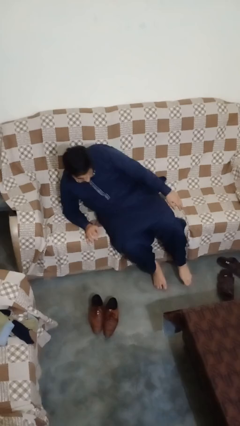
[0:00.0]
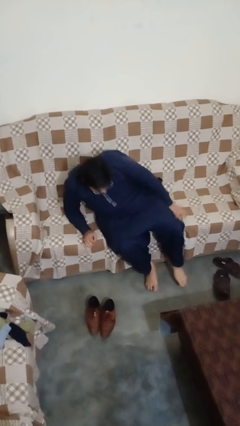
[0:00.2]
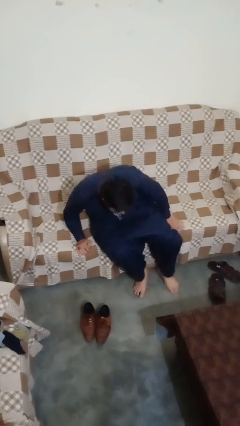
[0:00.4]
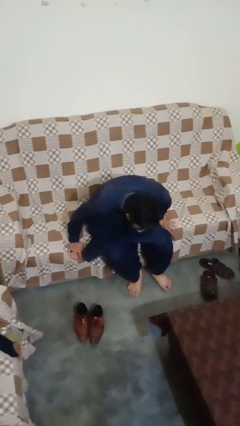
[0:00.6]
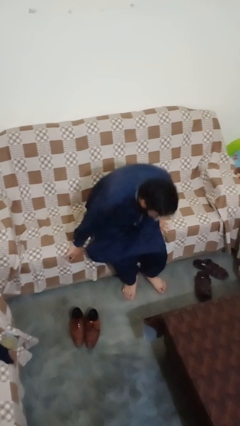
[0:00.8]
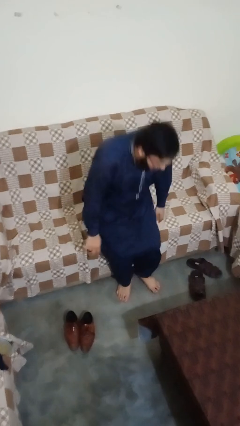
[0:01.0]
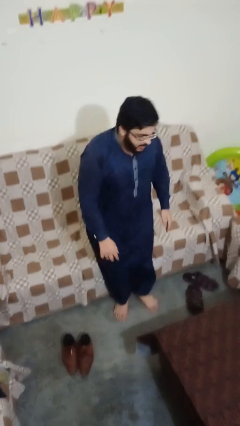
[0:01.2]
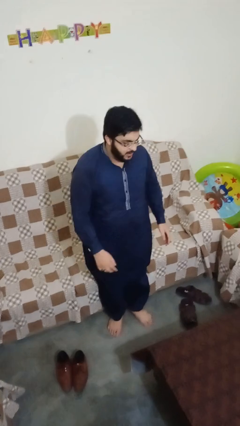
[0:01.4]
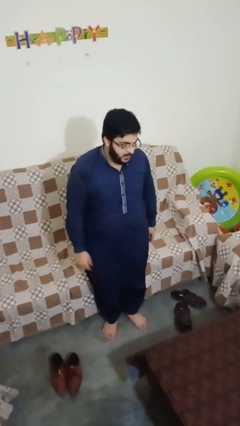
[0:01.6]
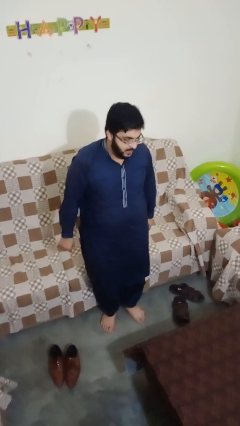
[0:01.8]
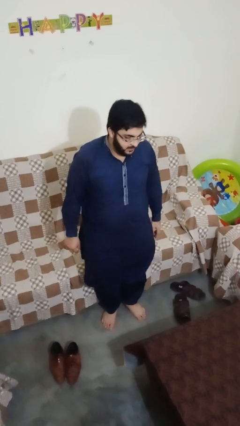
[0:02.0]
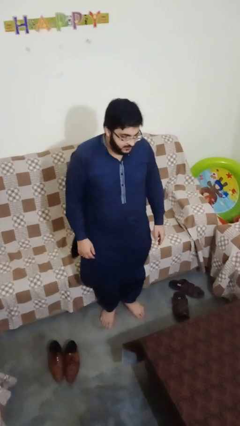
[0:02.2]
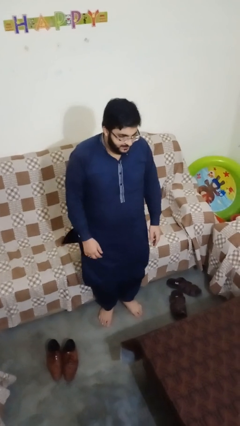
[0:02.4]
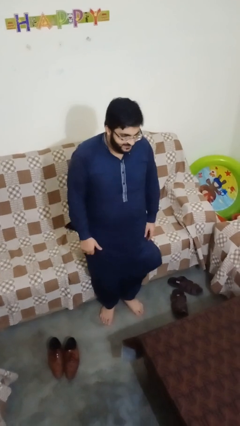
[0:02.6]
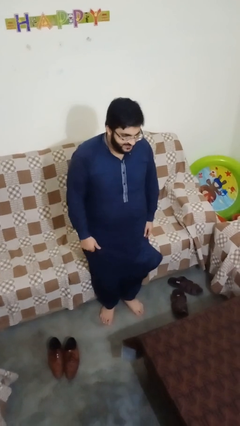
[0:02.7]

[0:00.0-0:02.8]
person stands up

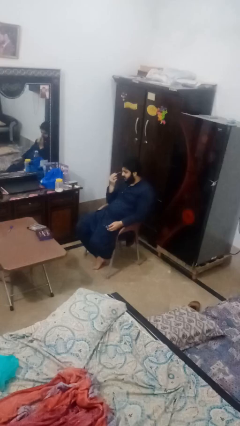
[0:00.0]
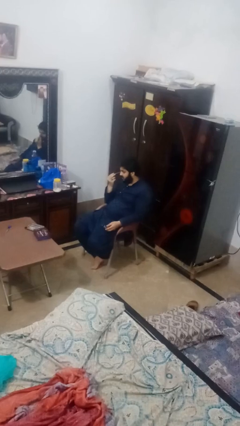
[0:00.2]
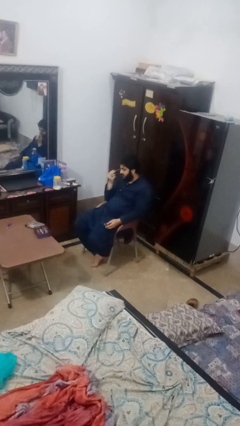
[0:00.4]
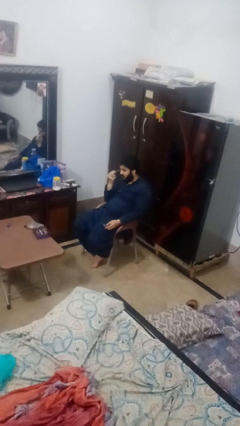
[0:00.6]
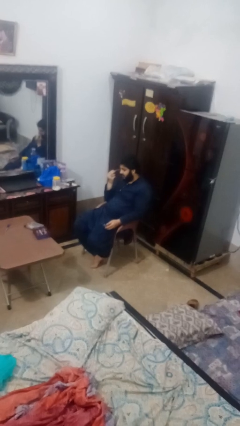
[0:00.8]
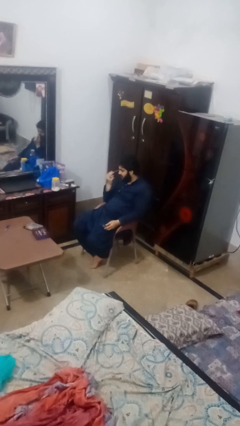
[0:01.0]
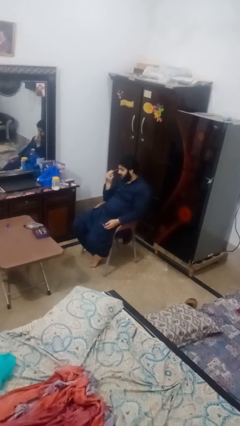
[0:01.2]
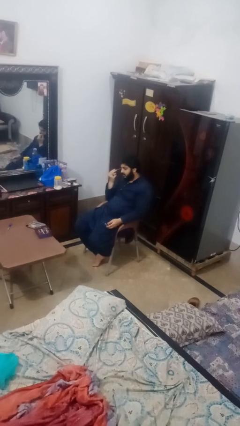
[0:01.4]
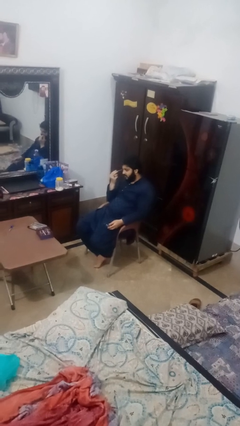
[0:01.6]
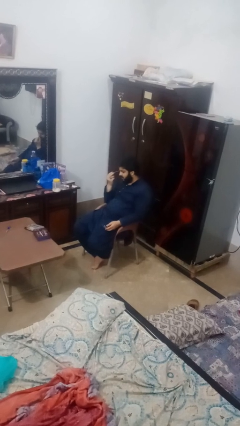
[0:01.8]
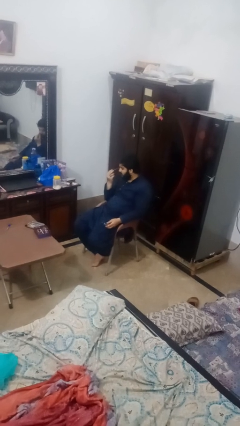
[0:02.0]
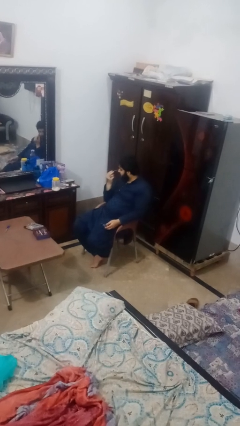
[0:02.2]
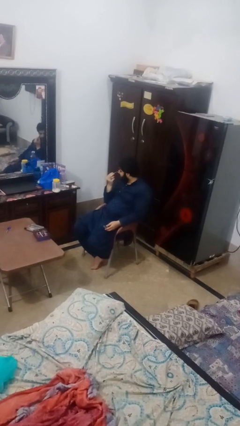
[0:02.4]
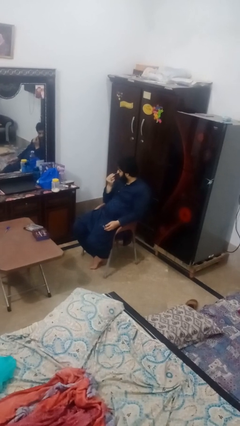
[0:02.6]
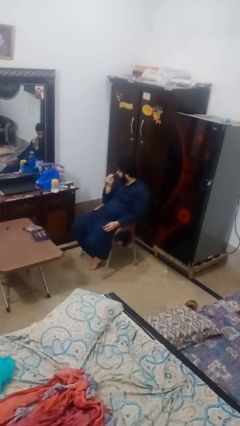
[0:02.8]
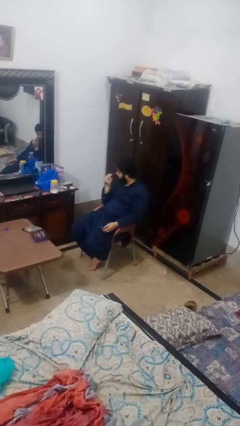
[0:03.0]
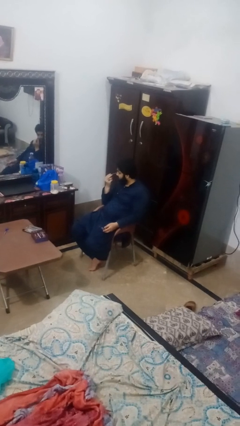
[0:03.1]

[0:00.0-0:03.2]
person applies eye makeup

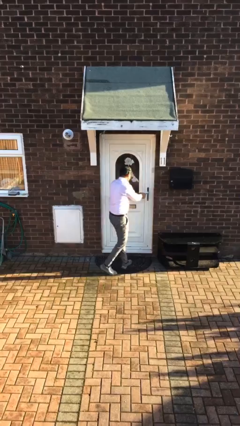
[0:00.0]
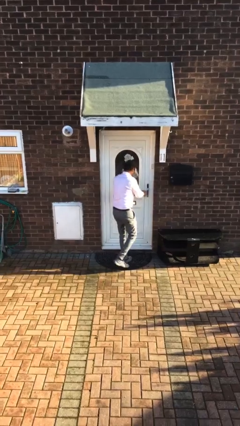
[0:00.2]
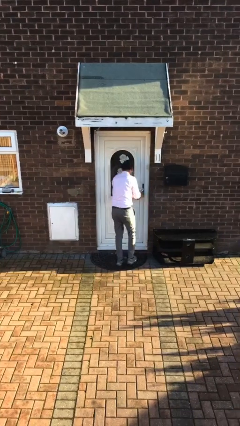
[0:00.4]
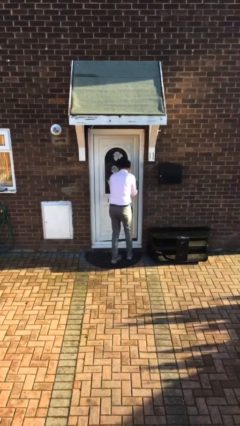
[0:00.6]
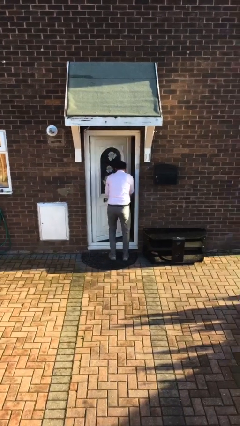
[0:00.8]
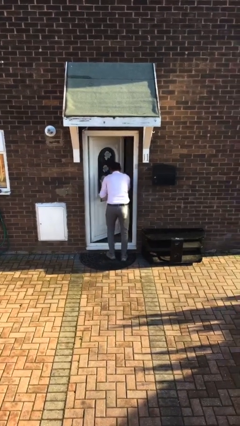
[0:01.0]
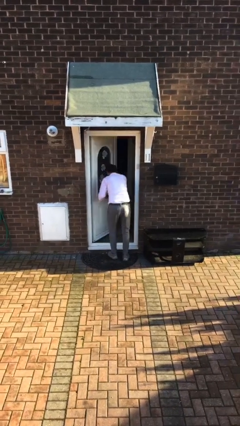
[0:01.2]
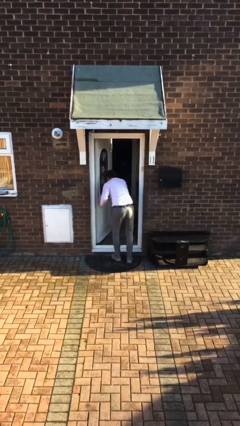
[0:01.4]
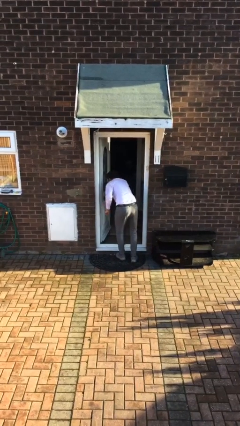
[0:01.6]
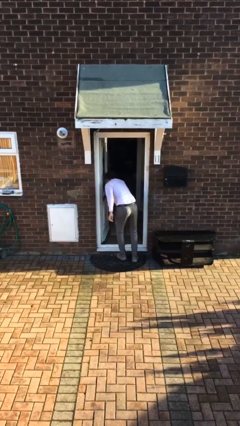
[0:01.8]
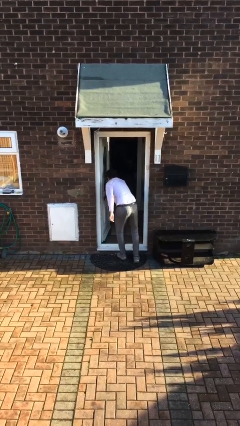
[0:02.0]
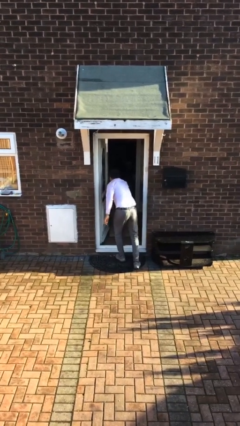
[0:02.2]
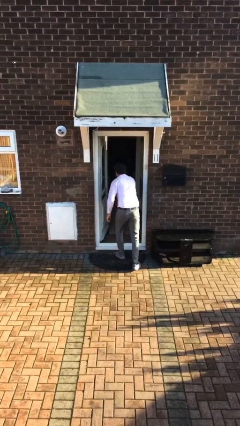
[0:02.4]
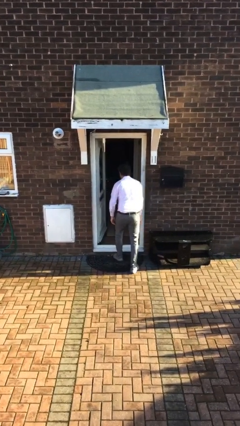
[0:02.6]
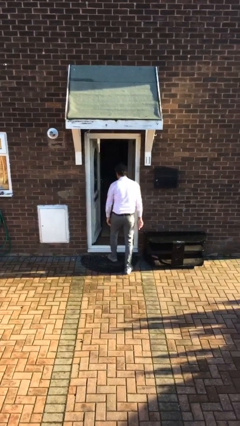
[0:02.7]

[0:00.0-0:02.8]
person opens facility door

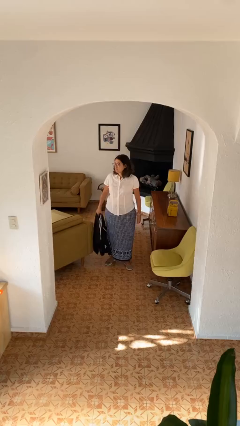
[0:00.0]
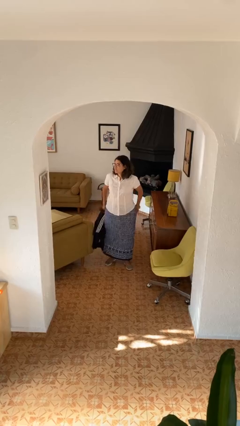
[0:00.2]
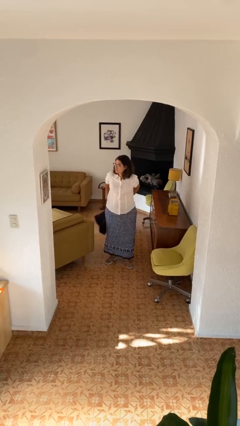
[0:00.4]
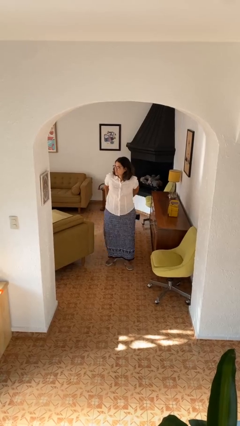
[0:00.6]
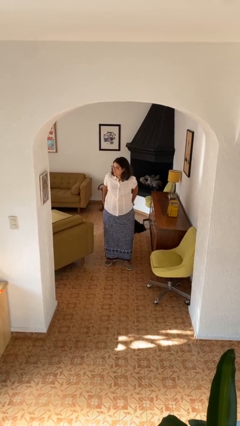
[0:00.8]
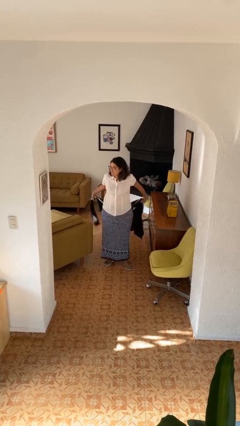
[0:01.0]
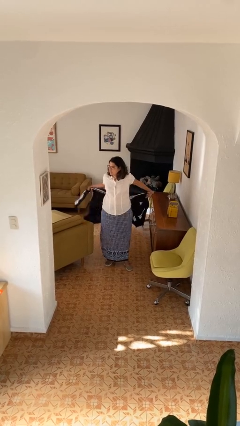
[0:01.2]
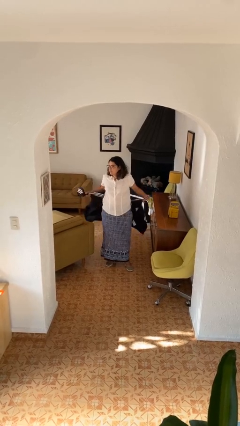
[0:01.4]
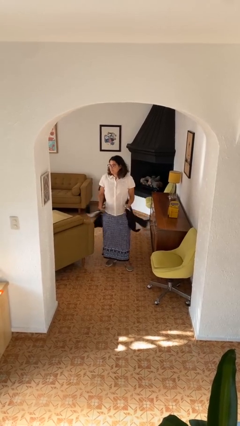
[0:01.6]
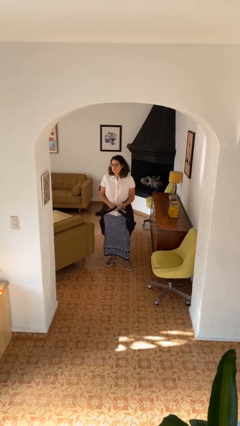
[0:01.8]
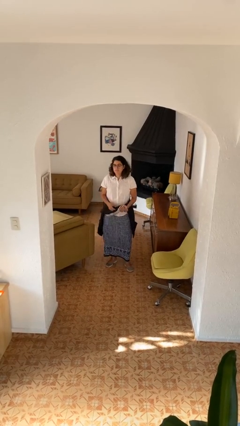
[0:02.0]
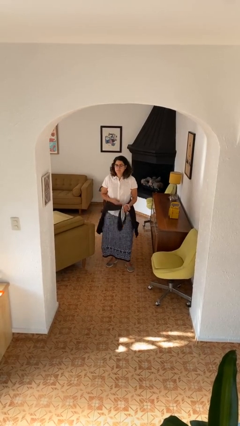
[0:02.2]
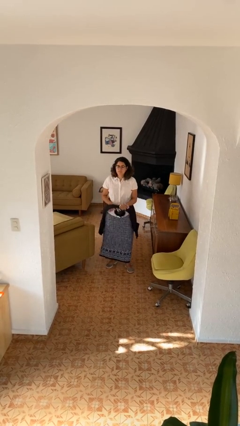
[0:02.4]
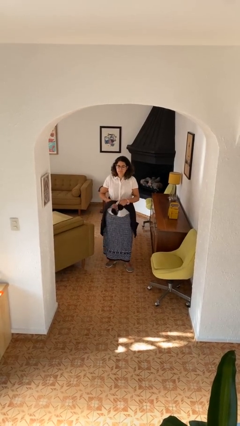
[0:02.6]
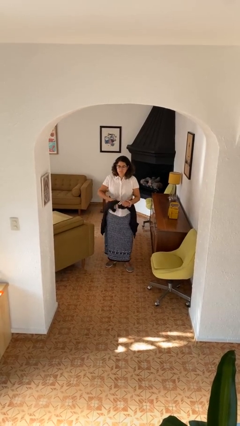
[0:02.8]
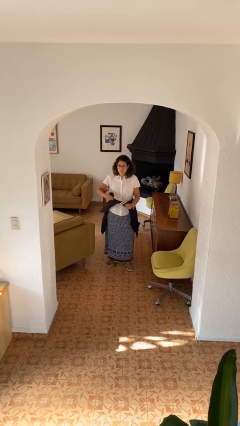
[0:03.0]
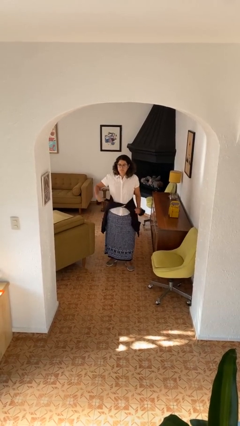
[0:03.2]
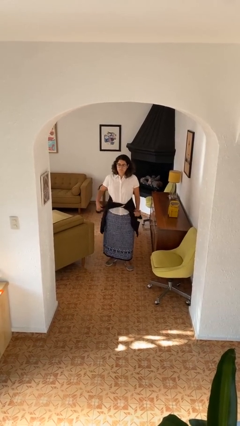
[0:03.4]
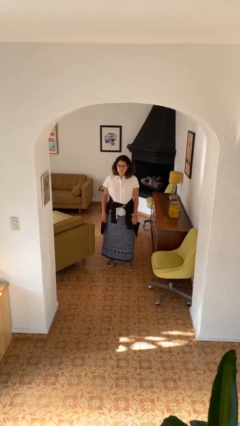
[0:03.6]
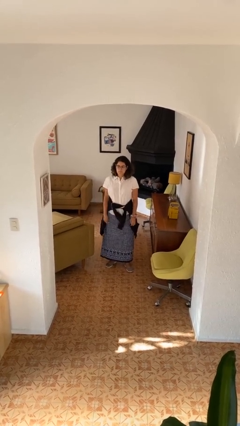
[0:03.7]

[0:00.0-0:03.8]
person ties jacket around waist

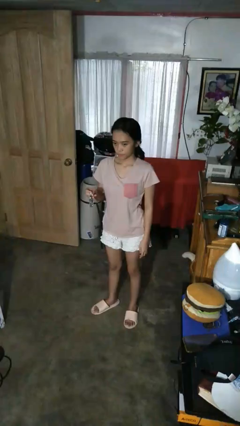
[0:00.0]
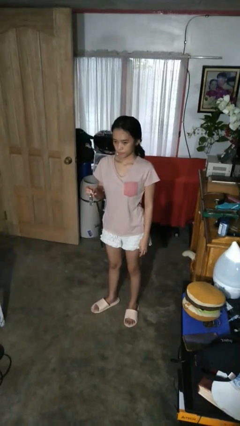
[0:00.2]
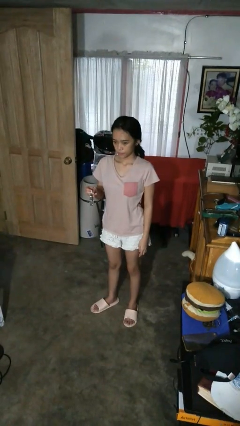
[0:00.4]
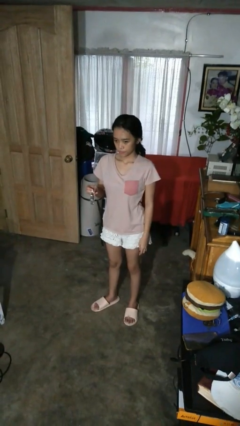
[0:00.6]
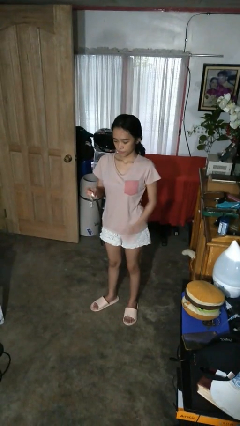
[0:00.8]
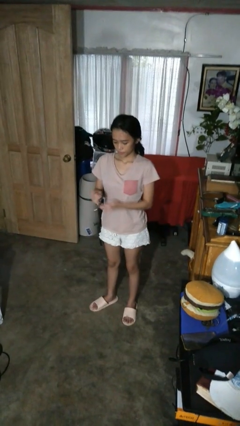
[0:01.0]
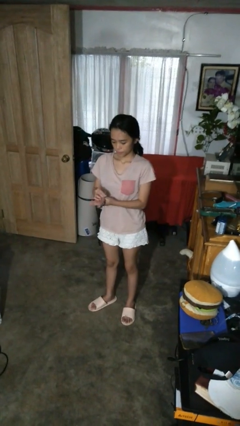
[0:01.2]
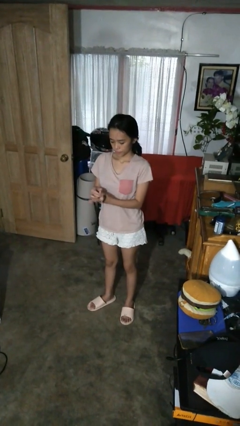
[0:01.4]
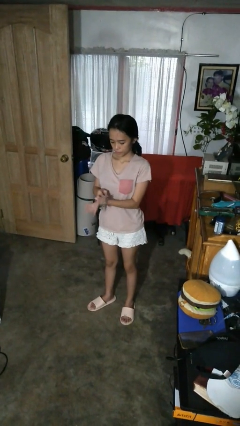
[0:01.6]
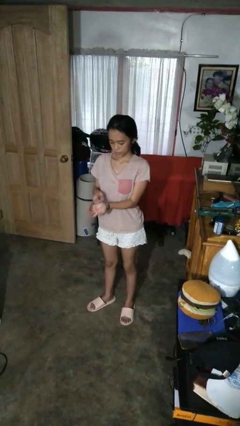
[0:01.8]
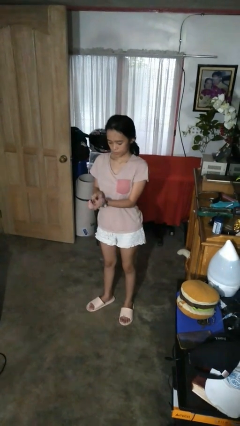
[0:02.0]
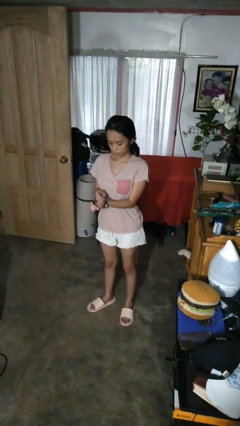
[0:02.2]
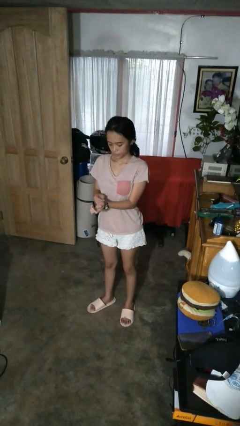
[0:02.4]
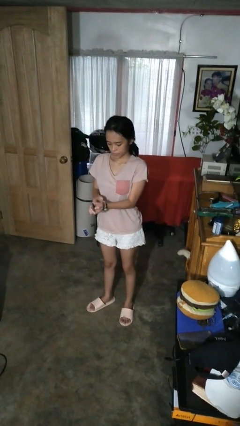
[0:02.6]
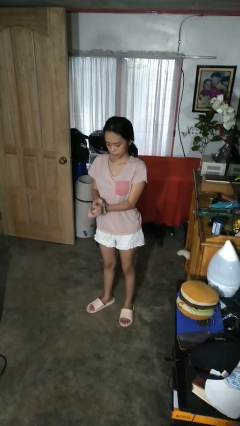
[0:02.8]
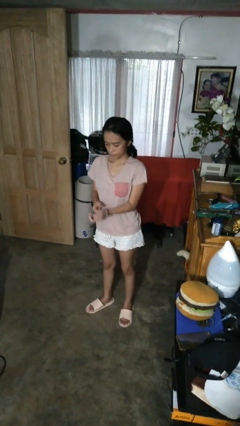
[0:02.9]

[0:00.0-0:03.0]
person puts on wristwatch

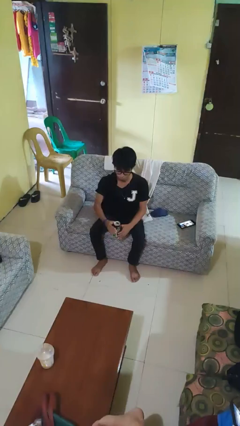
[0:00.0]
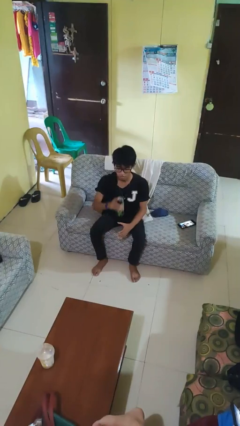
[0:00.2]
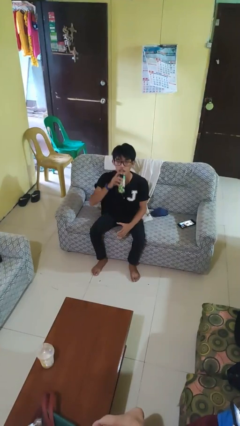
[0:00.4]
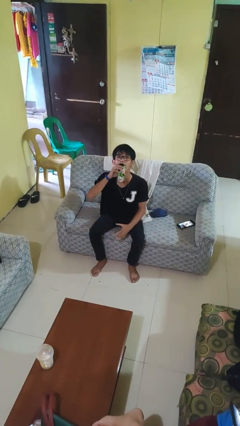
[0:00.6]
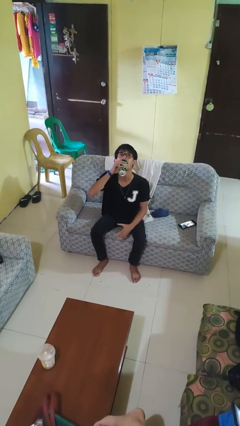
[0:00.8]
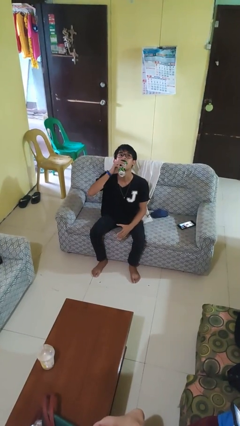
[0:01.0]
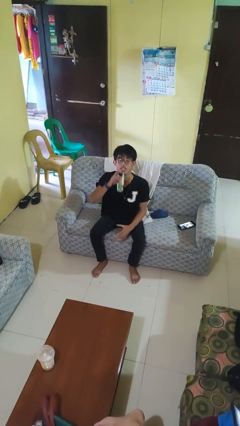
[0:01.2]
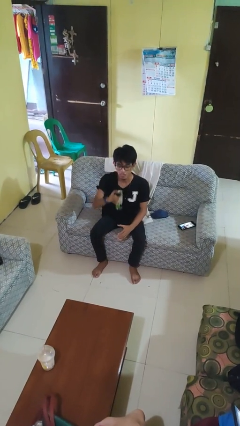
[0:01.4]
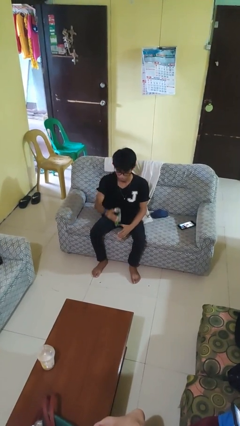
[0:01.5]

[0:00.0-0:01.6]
person drinks from beverage can
